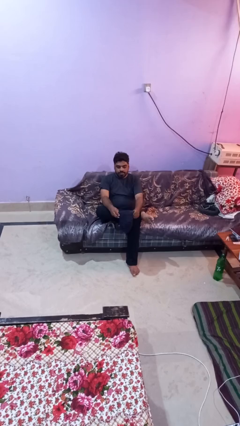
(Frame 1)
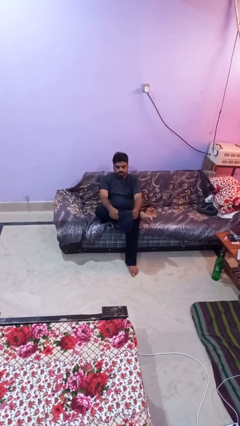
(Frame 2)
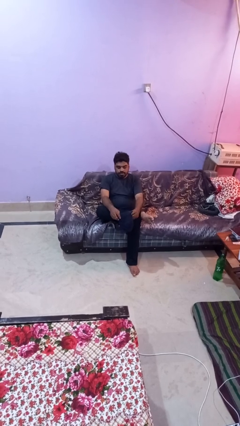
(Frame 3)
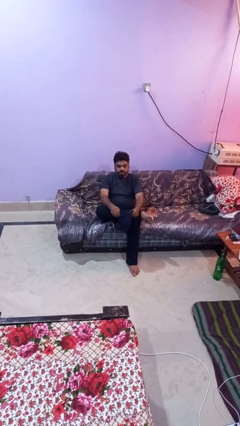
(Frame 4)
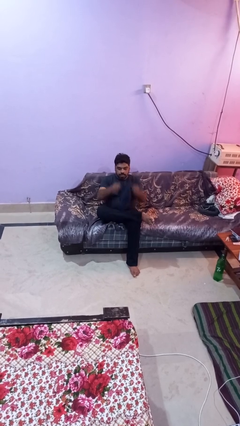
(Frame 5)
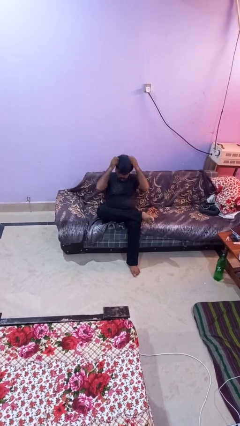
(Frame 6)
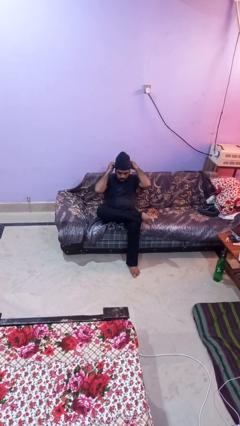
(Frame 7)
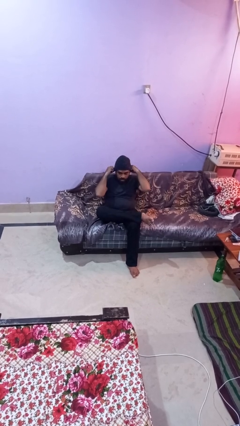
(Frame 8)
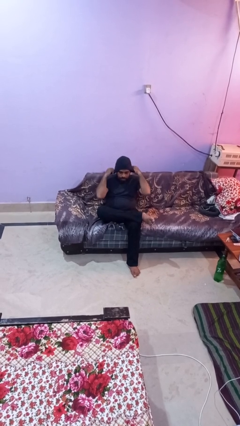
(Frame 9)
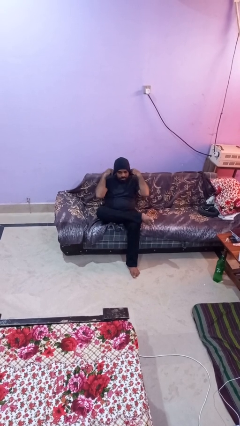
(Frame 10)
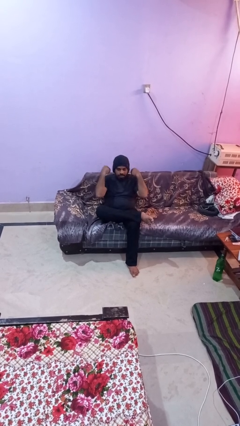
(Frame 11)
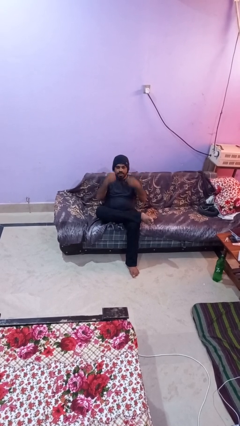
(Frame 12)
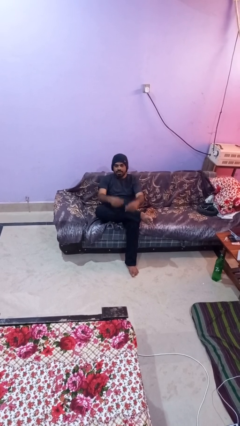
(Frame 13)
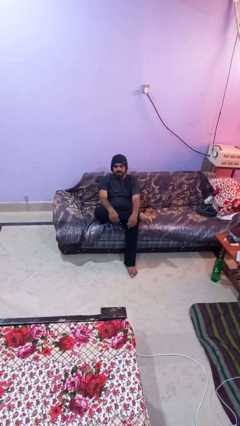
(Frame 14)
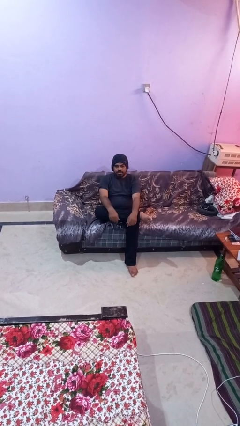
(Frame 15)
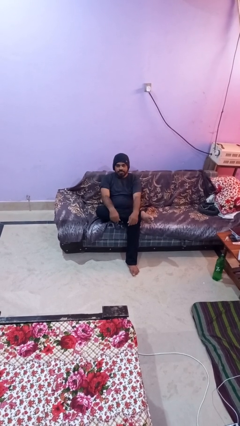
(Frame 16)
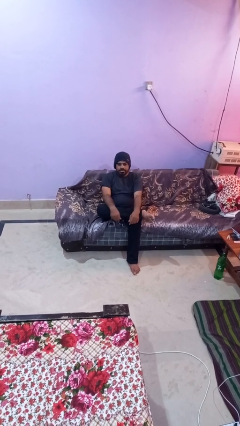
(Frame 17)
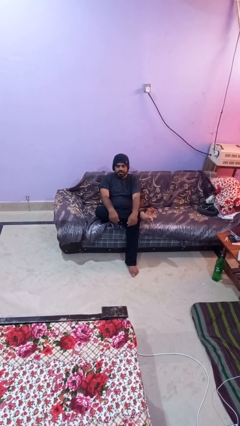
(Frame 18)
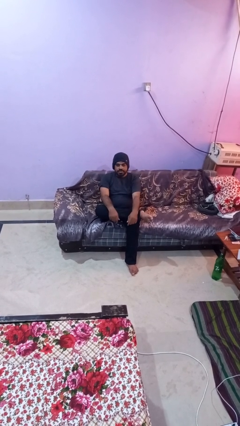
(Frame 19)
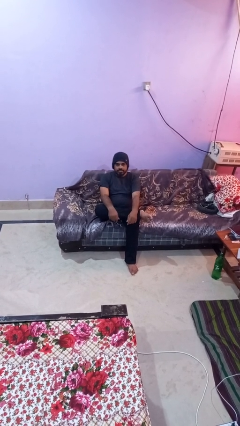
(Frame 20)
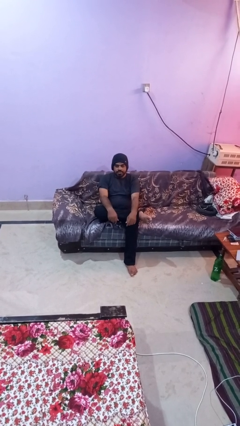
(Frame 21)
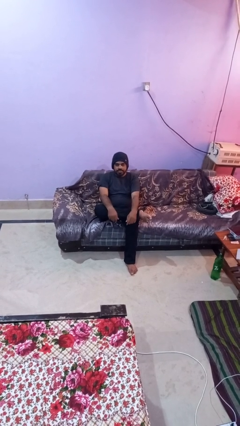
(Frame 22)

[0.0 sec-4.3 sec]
person puts on hat

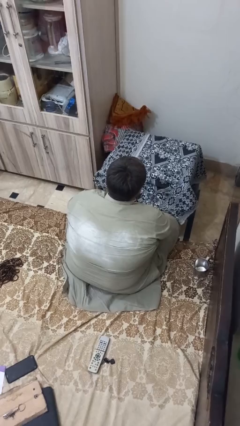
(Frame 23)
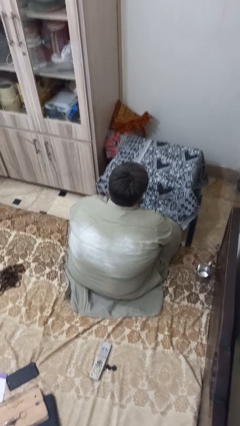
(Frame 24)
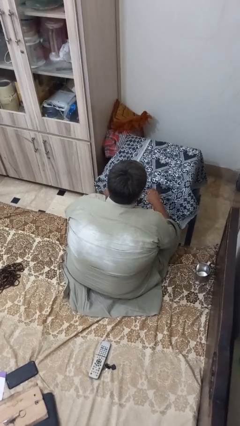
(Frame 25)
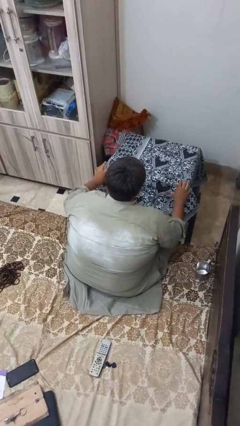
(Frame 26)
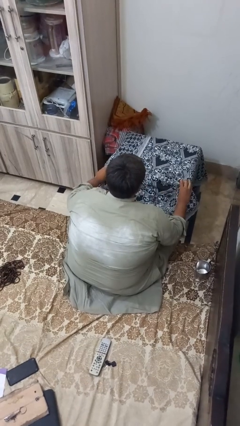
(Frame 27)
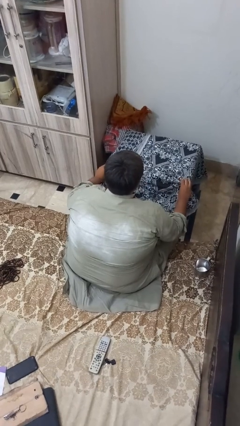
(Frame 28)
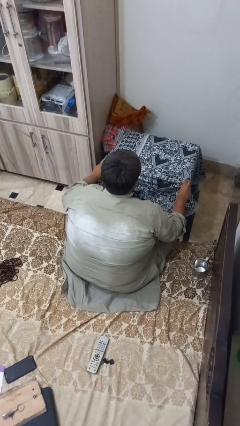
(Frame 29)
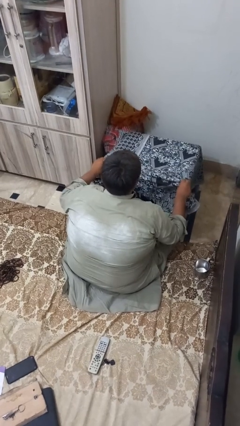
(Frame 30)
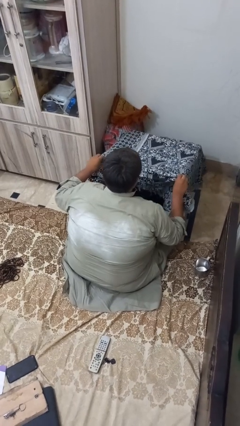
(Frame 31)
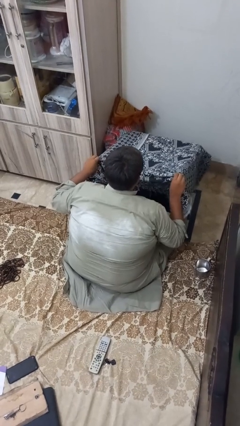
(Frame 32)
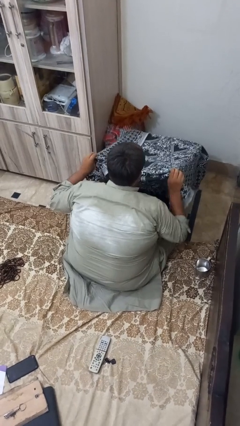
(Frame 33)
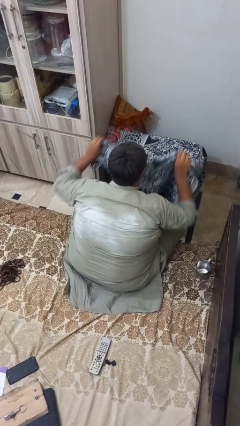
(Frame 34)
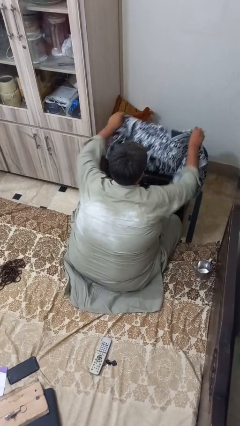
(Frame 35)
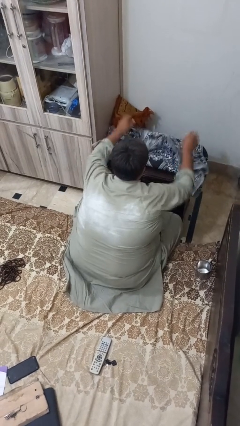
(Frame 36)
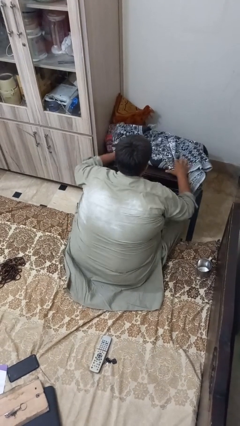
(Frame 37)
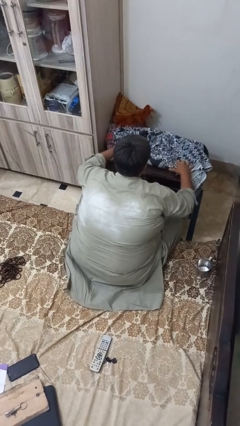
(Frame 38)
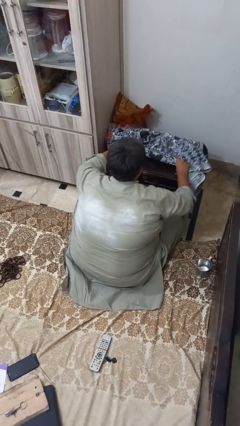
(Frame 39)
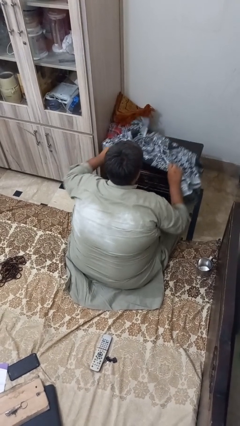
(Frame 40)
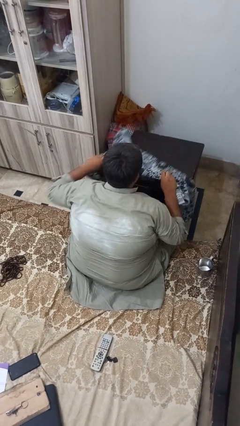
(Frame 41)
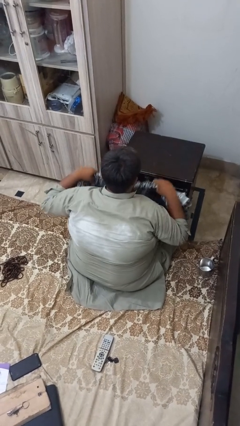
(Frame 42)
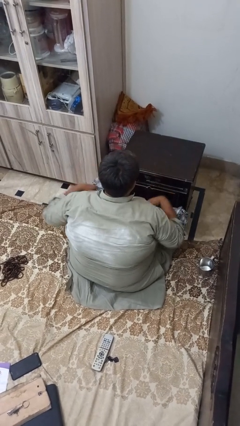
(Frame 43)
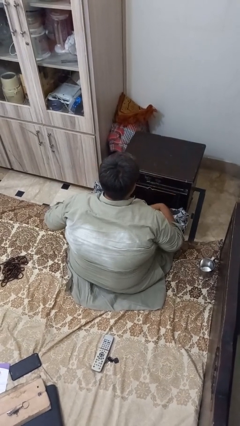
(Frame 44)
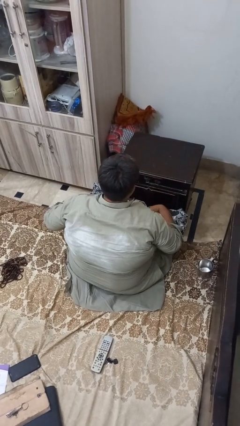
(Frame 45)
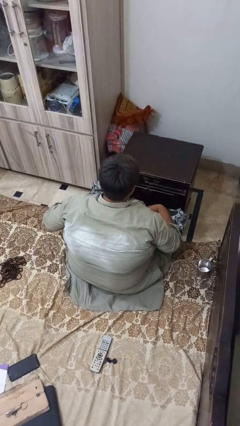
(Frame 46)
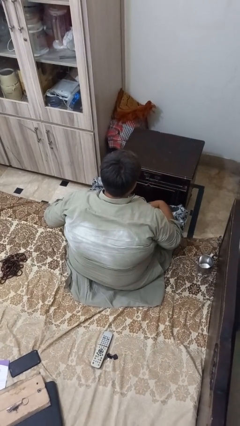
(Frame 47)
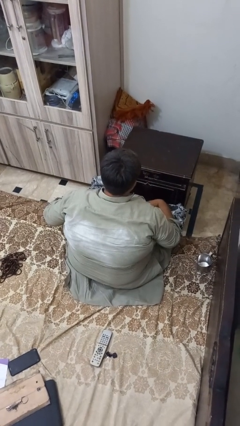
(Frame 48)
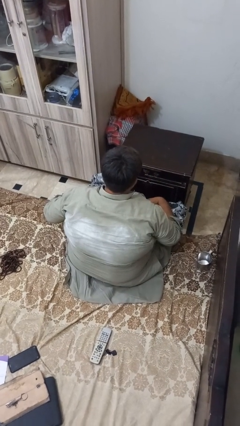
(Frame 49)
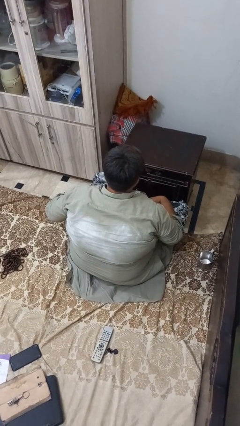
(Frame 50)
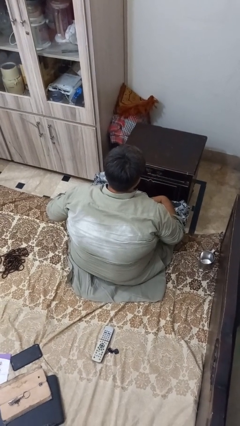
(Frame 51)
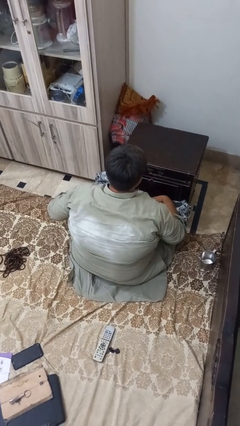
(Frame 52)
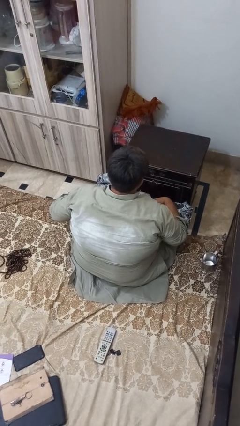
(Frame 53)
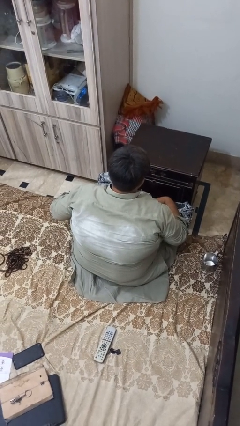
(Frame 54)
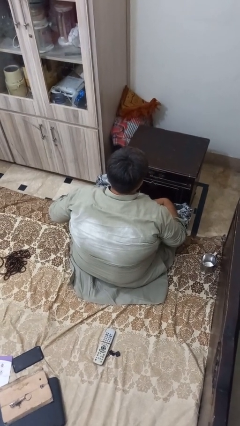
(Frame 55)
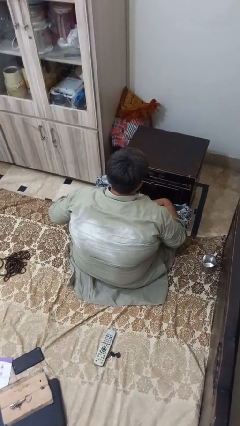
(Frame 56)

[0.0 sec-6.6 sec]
person folds tablecloth

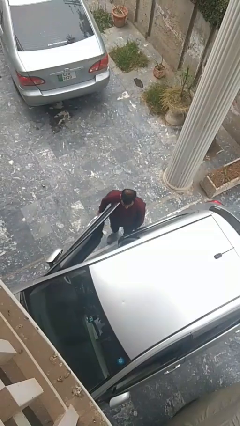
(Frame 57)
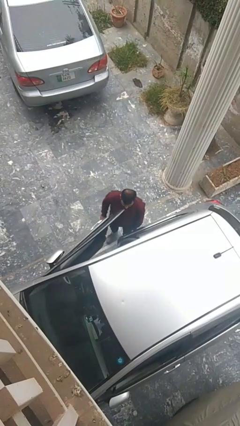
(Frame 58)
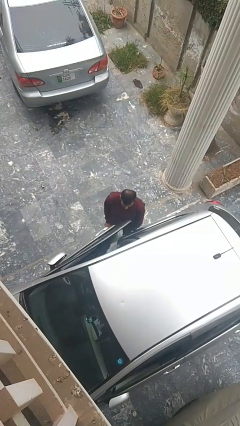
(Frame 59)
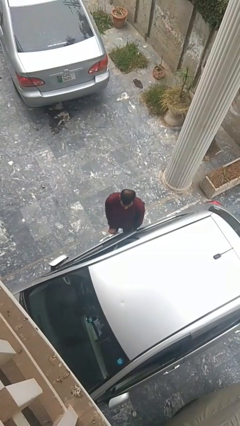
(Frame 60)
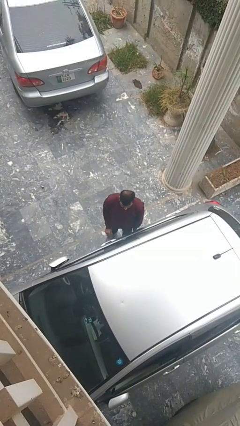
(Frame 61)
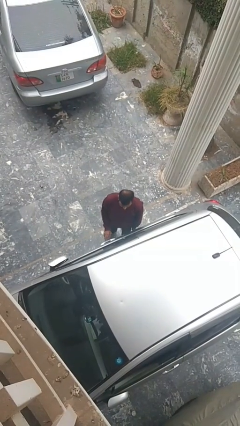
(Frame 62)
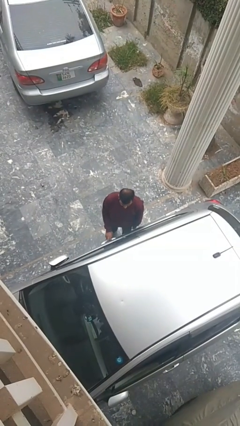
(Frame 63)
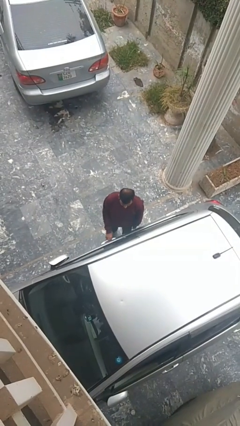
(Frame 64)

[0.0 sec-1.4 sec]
person closes car door

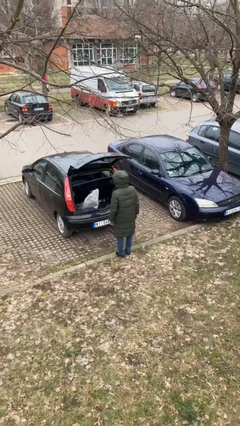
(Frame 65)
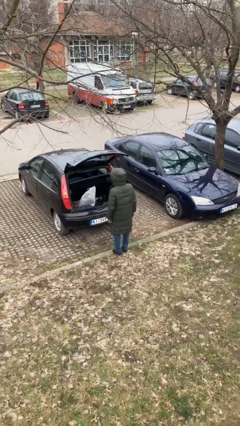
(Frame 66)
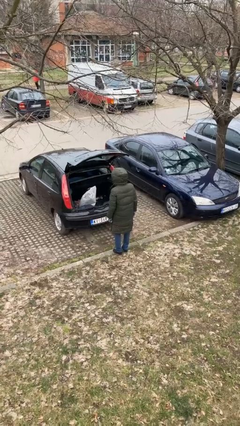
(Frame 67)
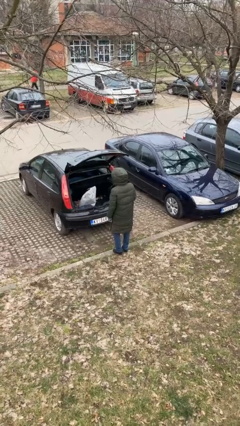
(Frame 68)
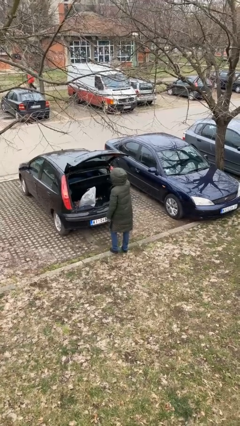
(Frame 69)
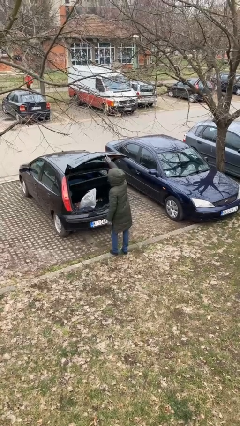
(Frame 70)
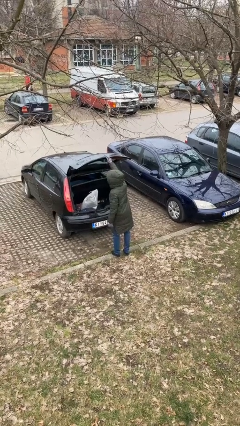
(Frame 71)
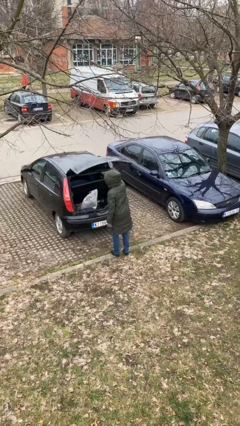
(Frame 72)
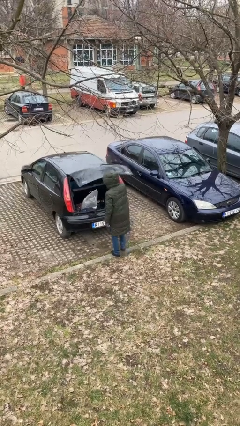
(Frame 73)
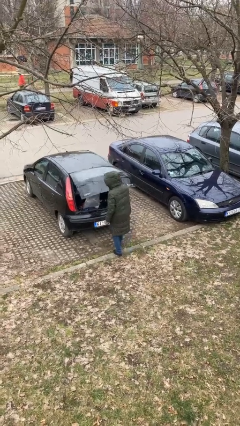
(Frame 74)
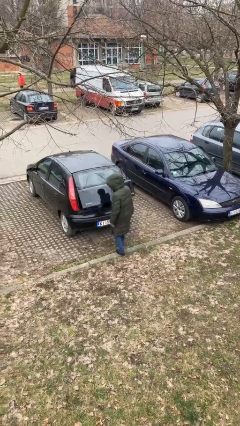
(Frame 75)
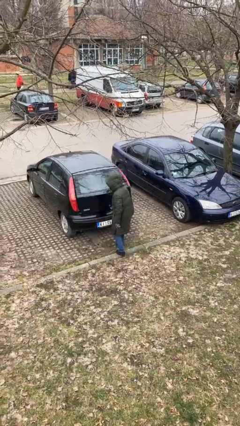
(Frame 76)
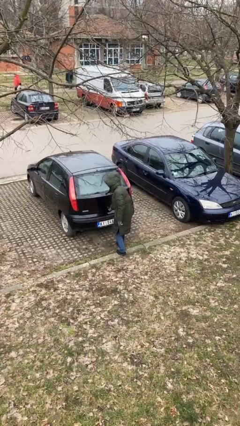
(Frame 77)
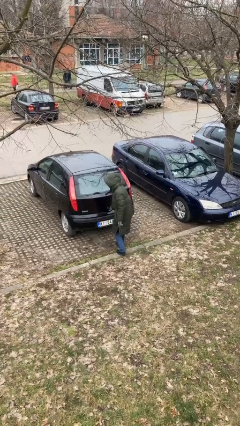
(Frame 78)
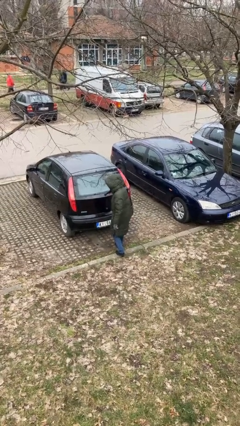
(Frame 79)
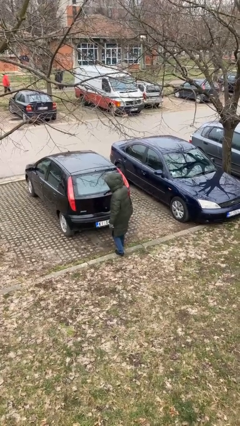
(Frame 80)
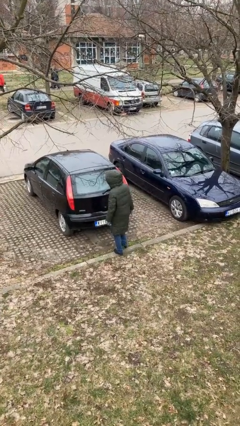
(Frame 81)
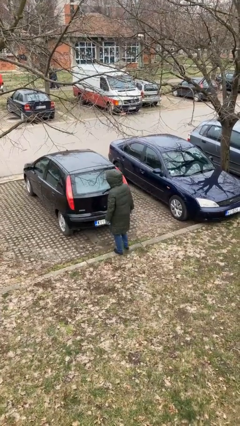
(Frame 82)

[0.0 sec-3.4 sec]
person closes car trunk

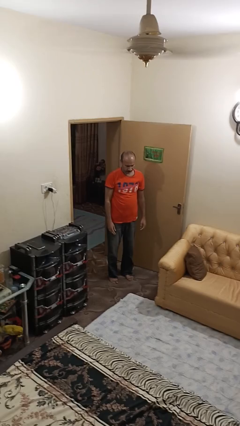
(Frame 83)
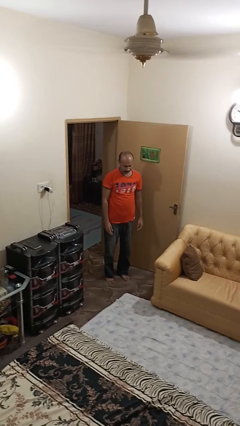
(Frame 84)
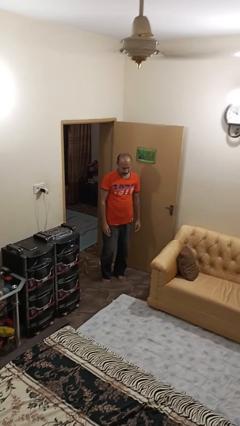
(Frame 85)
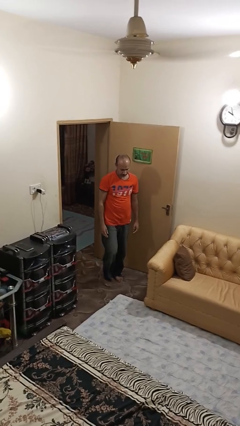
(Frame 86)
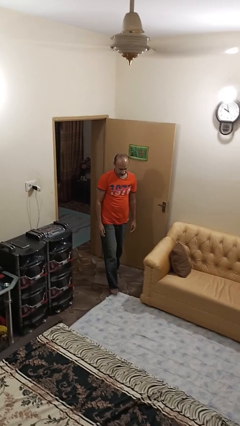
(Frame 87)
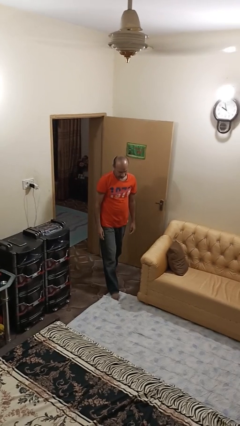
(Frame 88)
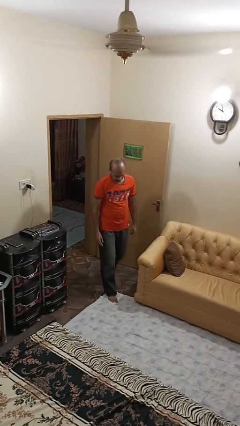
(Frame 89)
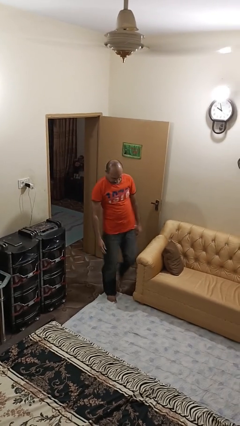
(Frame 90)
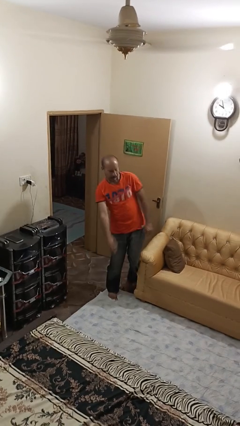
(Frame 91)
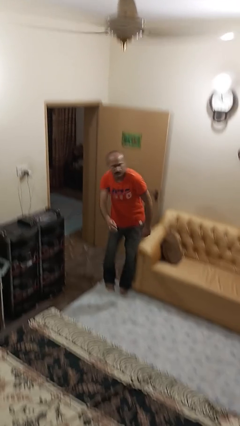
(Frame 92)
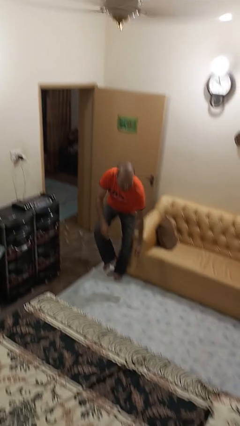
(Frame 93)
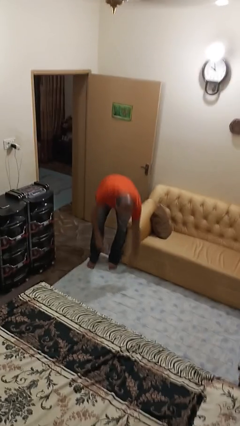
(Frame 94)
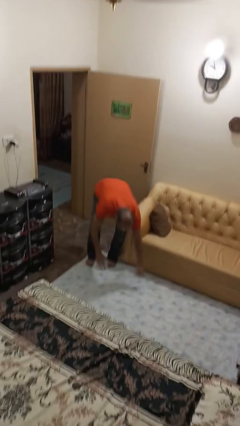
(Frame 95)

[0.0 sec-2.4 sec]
person trips on object on floor
